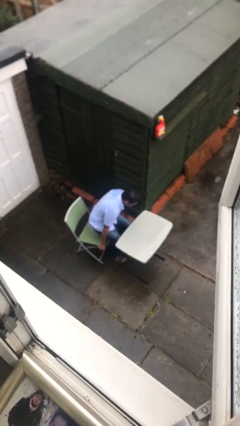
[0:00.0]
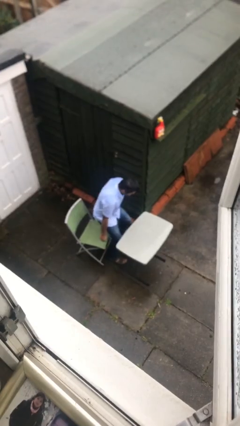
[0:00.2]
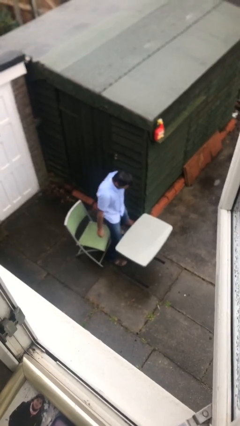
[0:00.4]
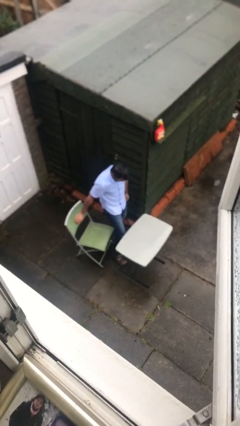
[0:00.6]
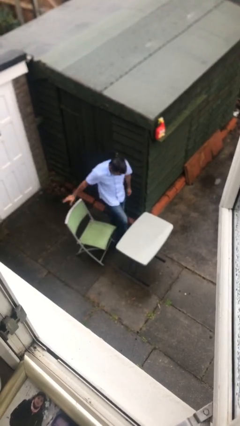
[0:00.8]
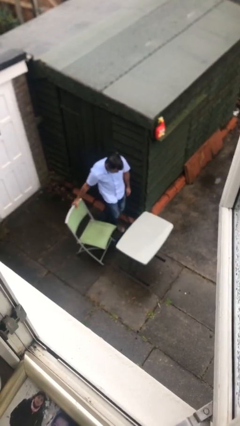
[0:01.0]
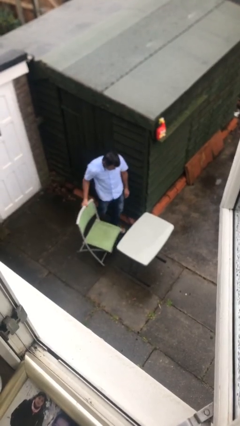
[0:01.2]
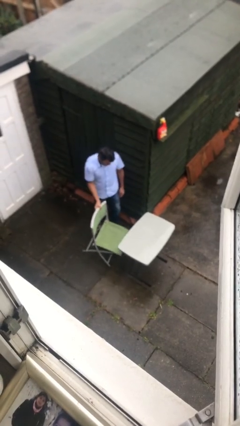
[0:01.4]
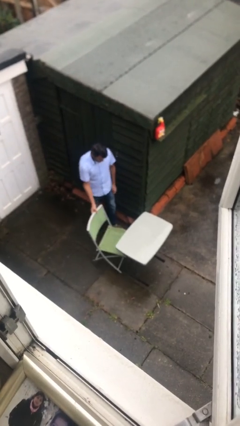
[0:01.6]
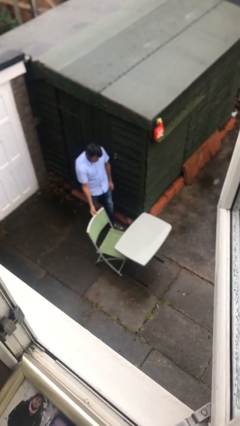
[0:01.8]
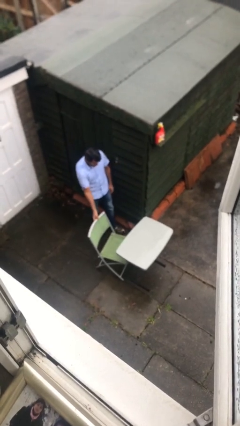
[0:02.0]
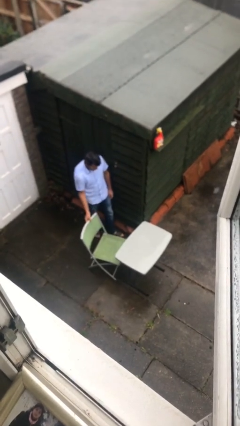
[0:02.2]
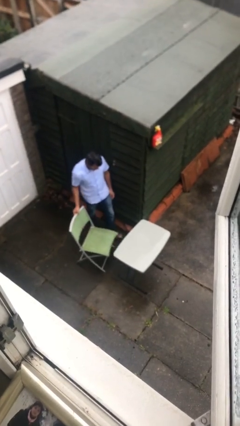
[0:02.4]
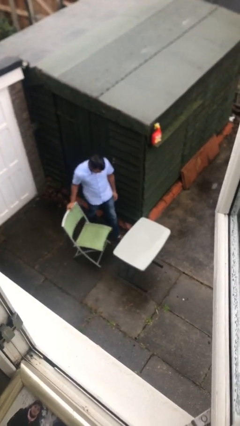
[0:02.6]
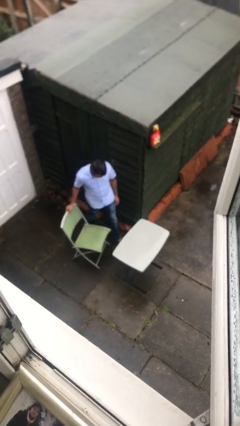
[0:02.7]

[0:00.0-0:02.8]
person stands up

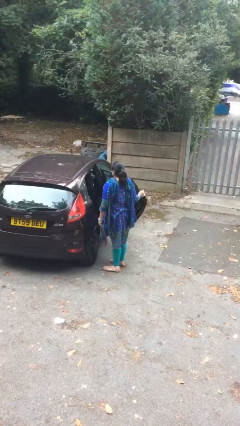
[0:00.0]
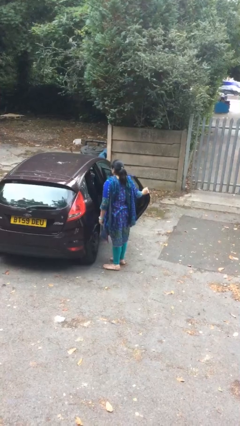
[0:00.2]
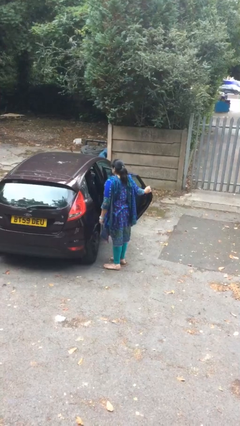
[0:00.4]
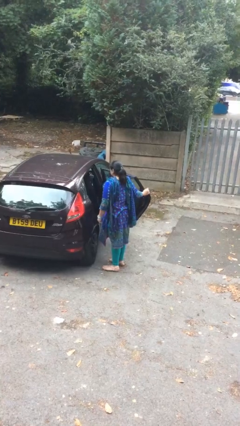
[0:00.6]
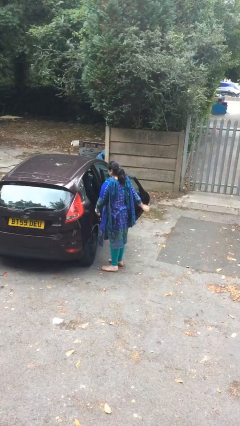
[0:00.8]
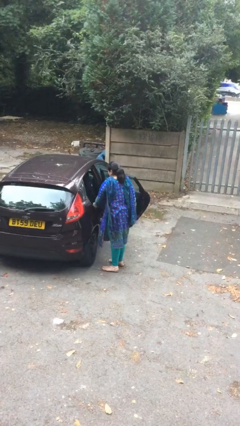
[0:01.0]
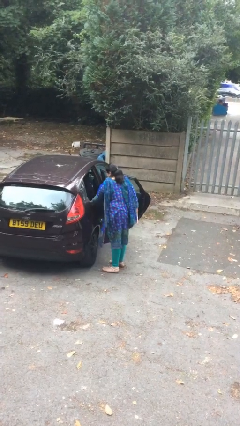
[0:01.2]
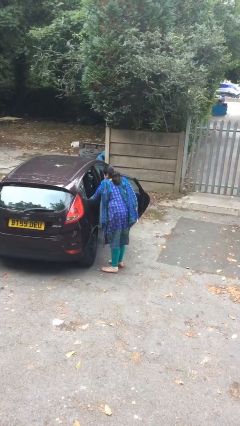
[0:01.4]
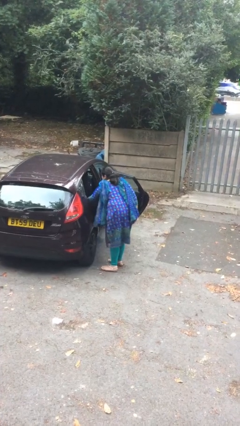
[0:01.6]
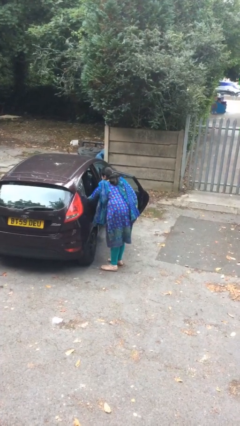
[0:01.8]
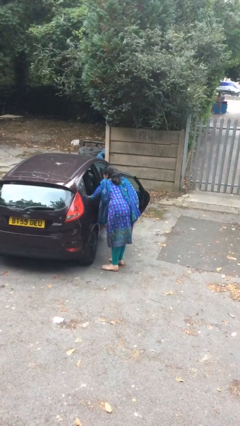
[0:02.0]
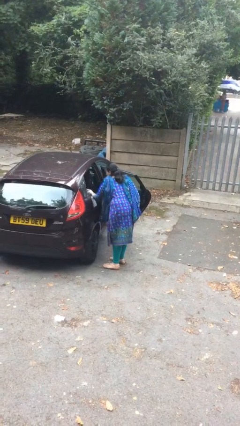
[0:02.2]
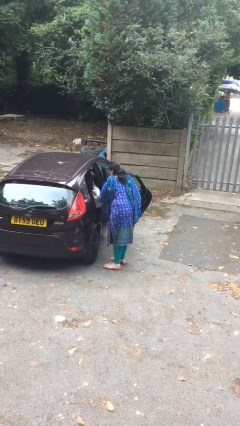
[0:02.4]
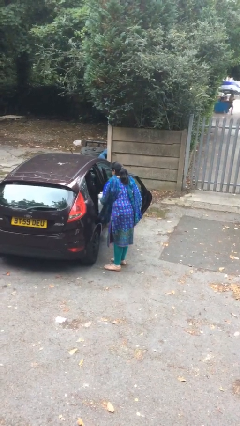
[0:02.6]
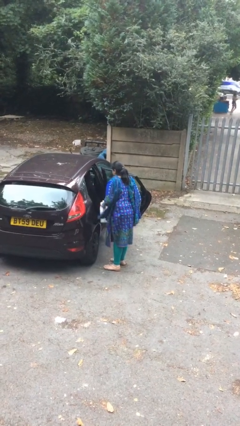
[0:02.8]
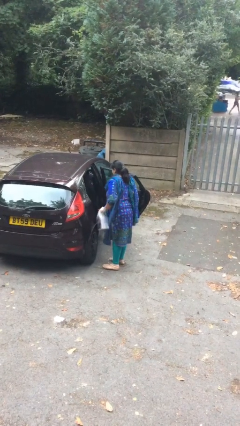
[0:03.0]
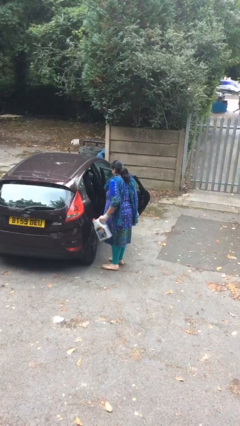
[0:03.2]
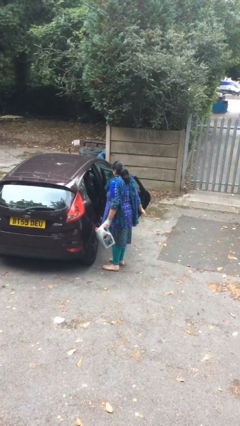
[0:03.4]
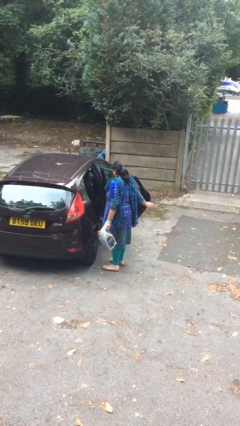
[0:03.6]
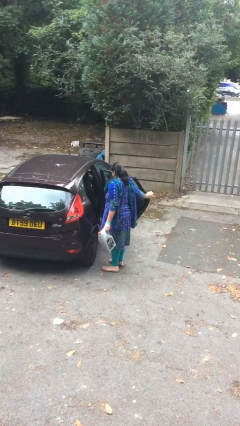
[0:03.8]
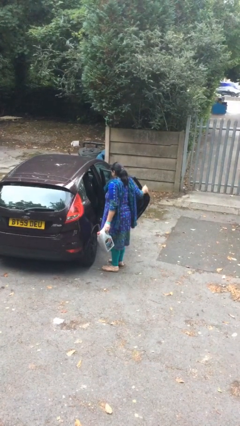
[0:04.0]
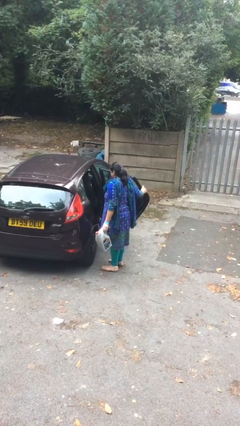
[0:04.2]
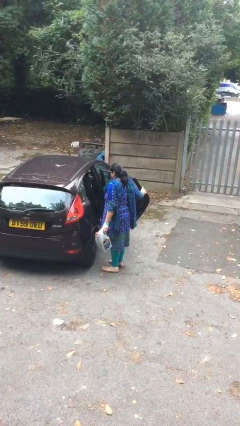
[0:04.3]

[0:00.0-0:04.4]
person unloads car

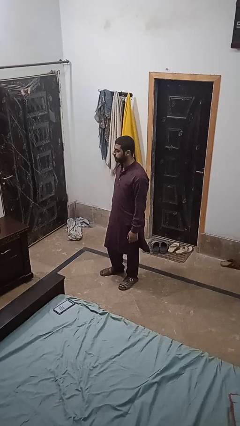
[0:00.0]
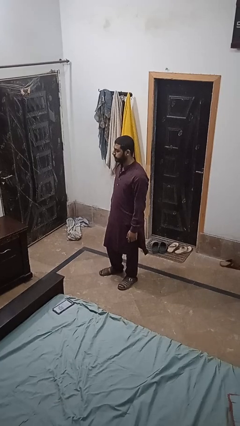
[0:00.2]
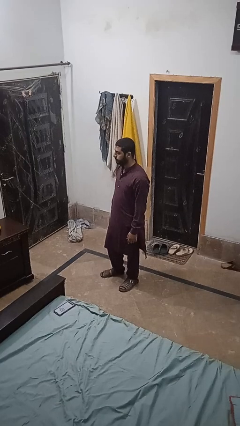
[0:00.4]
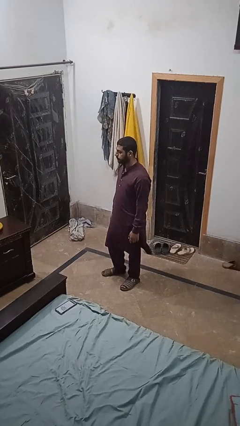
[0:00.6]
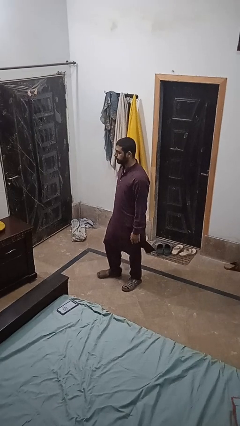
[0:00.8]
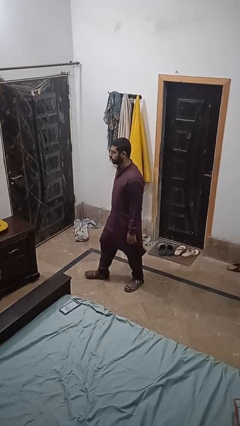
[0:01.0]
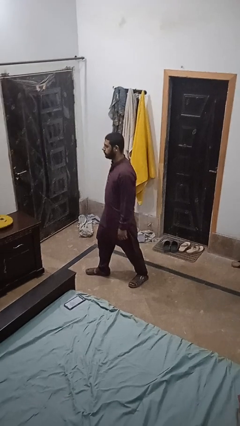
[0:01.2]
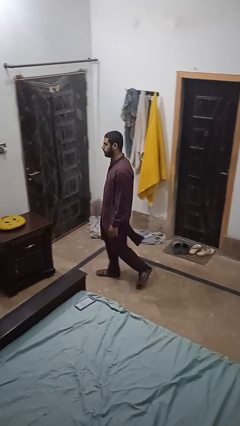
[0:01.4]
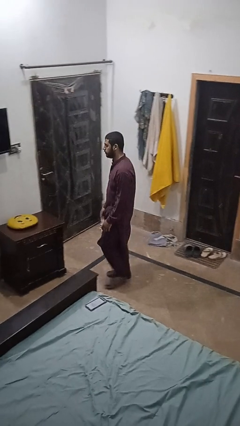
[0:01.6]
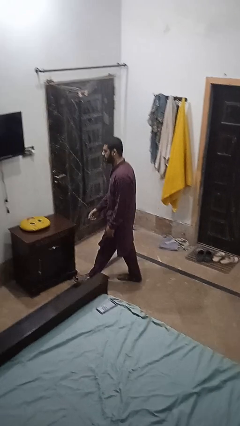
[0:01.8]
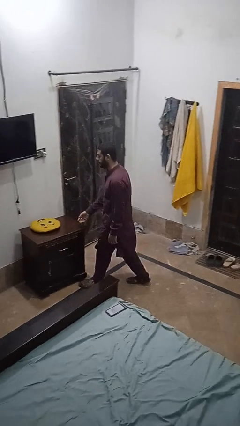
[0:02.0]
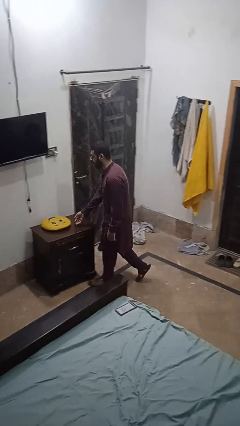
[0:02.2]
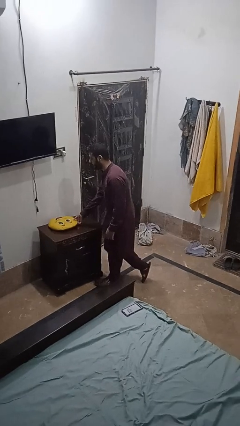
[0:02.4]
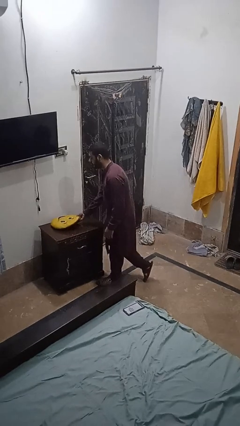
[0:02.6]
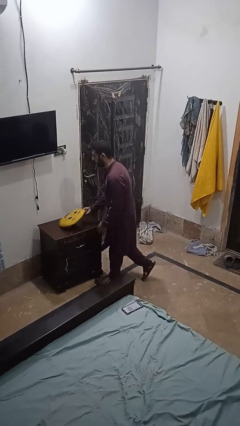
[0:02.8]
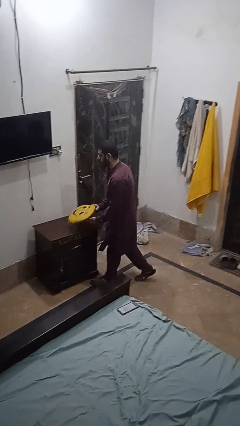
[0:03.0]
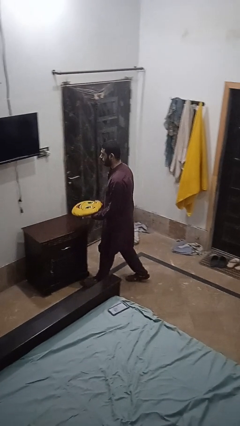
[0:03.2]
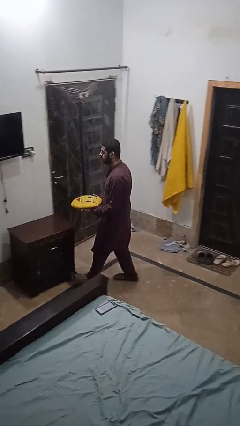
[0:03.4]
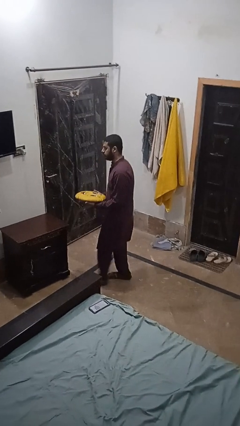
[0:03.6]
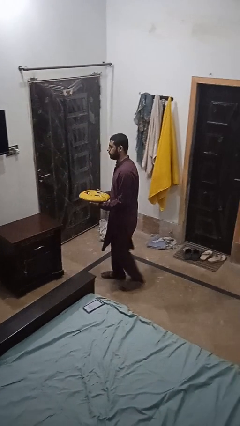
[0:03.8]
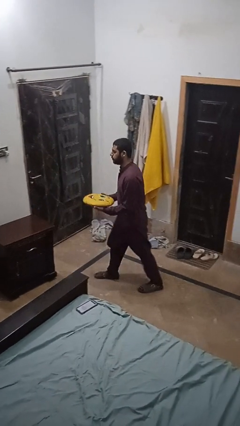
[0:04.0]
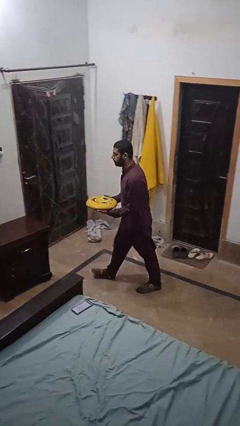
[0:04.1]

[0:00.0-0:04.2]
person picks up object from table

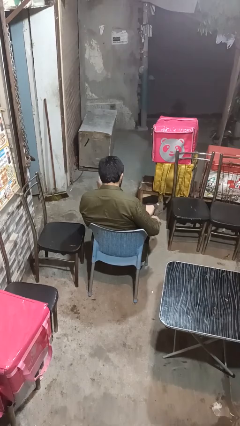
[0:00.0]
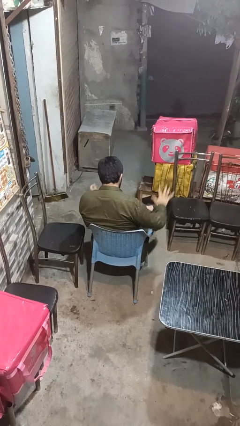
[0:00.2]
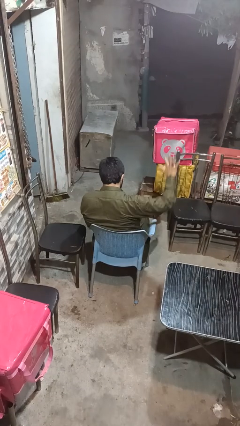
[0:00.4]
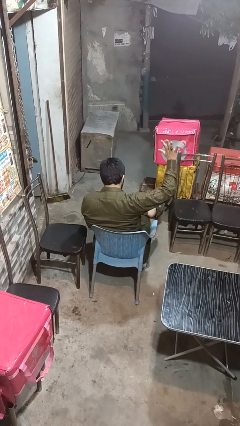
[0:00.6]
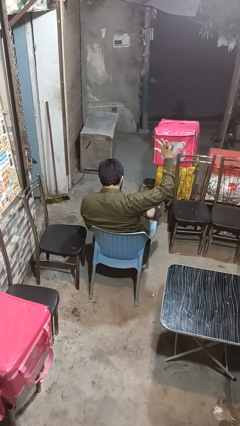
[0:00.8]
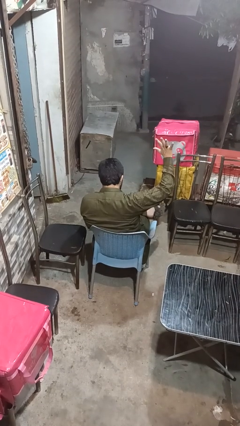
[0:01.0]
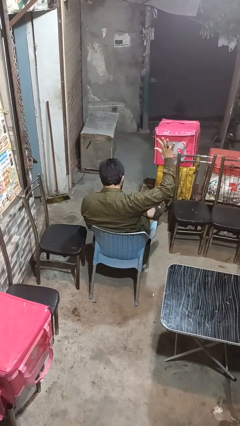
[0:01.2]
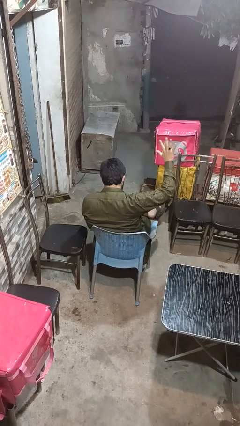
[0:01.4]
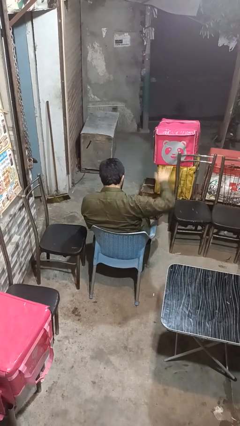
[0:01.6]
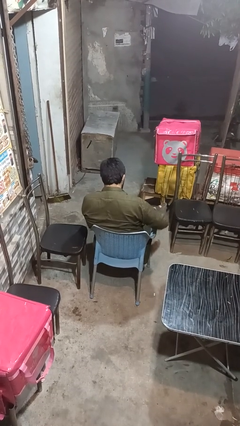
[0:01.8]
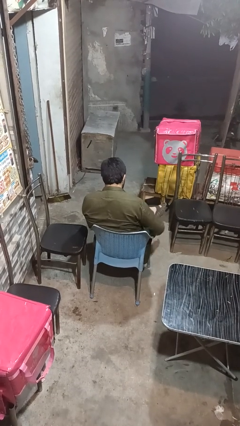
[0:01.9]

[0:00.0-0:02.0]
person gestures number five

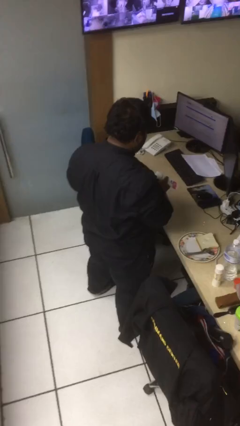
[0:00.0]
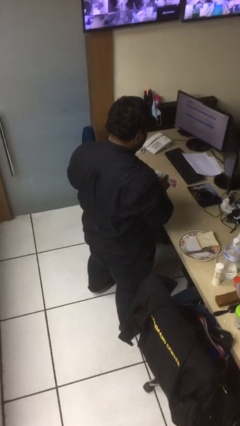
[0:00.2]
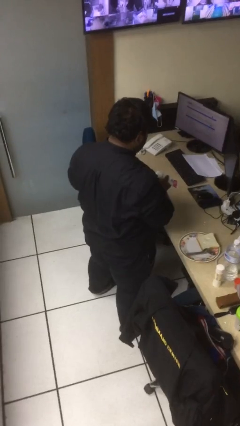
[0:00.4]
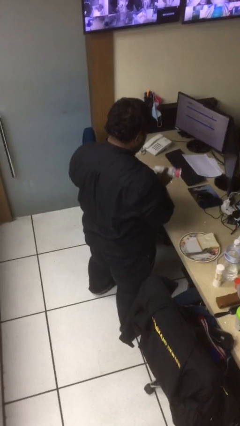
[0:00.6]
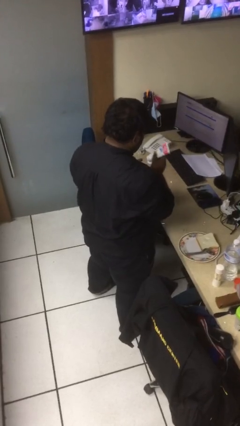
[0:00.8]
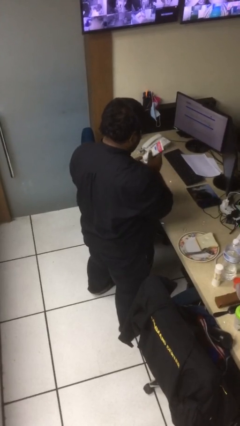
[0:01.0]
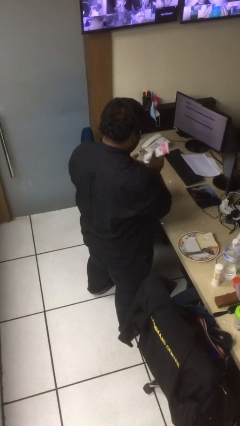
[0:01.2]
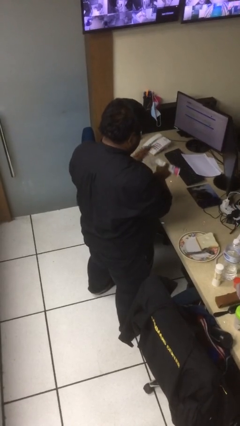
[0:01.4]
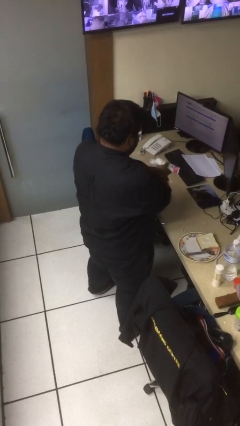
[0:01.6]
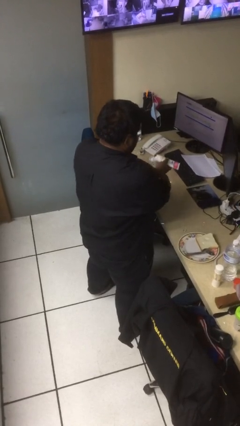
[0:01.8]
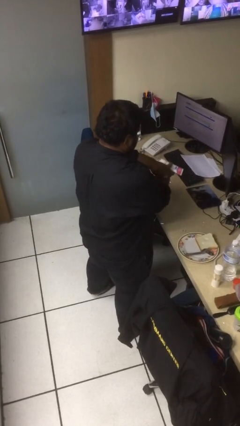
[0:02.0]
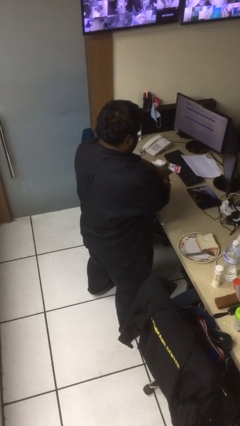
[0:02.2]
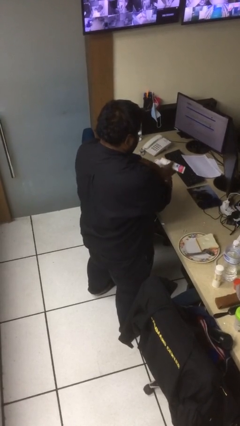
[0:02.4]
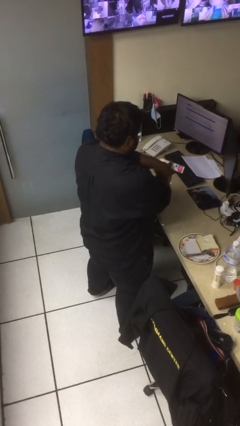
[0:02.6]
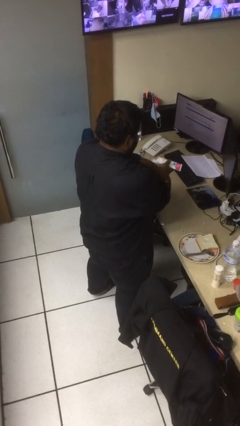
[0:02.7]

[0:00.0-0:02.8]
person applies sunscreen

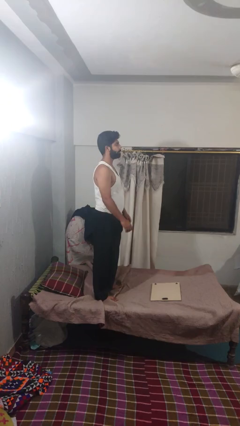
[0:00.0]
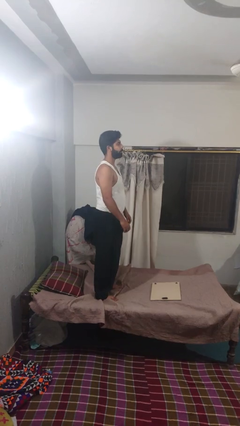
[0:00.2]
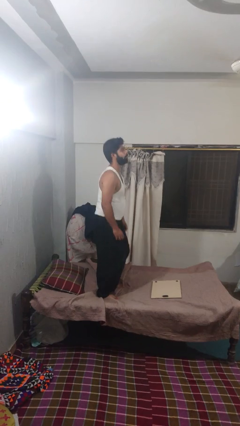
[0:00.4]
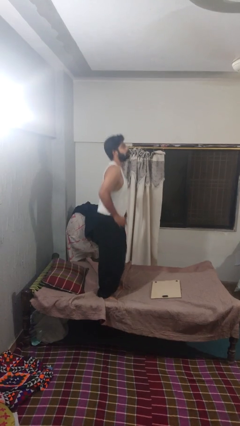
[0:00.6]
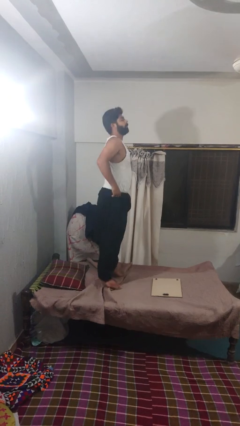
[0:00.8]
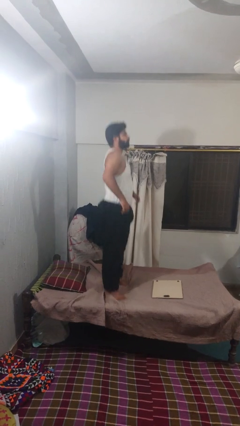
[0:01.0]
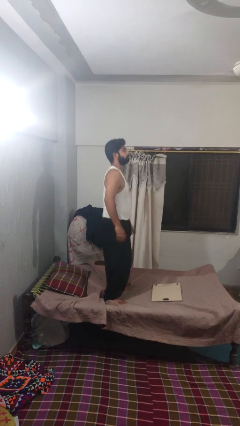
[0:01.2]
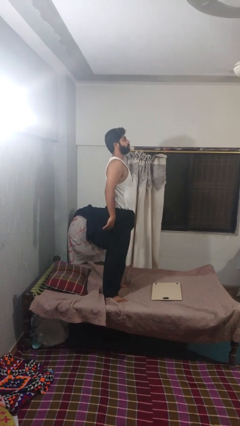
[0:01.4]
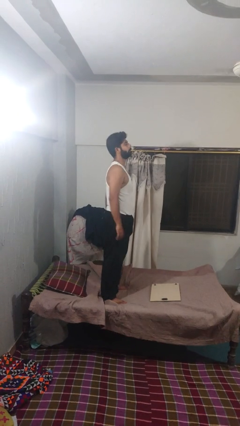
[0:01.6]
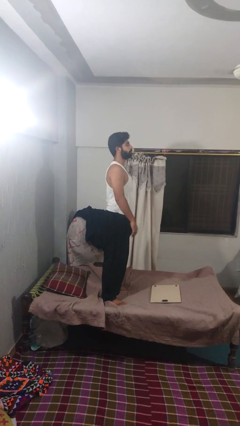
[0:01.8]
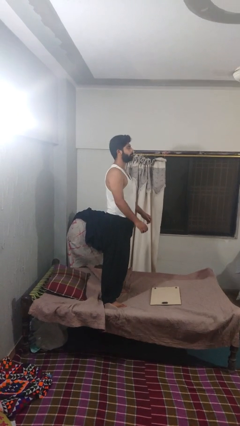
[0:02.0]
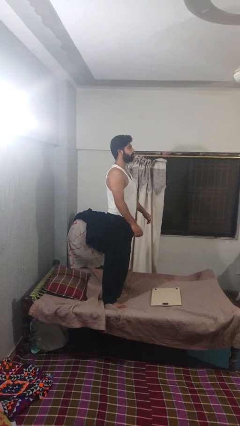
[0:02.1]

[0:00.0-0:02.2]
person jumps on bed
